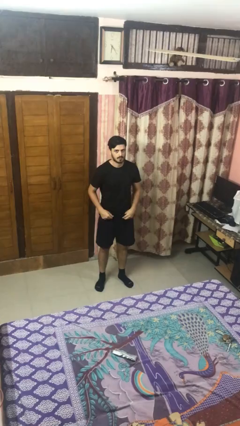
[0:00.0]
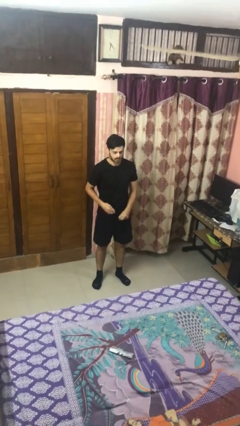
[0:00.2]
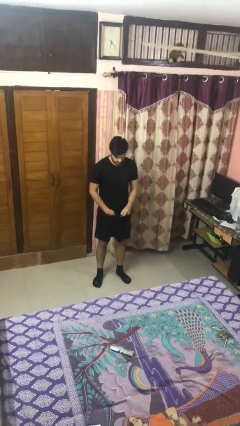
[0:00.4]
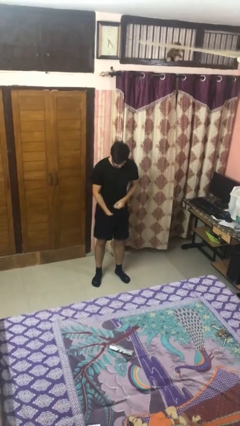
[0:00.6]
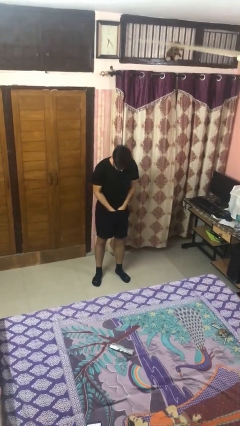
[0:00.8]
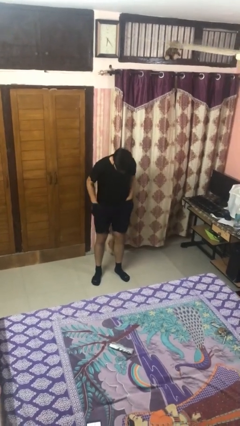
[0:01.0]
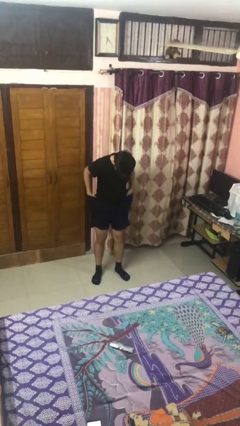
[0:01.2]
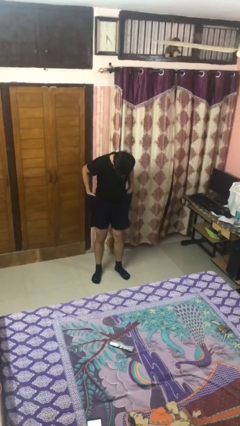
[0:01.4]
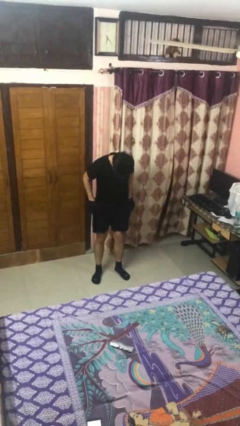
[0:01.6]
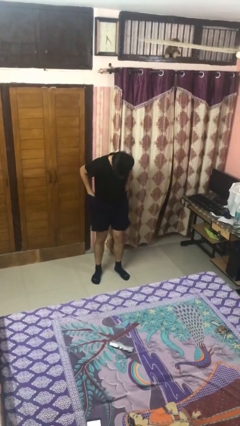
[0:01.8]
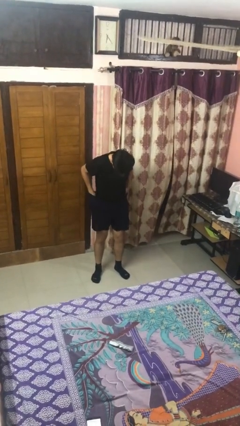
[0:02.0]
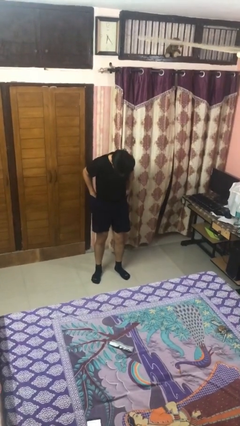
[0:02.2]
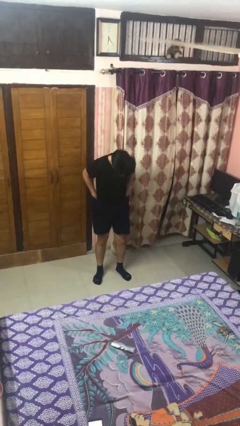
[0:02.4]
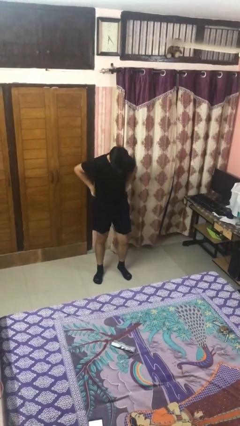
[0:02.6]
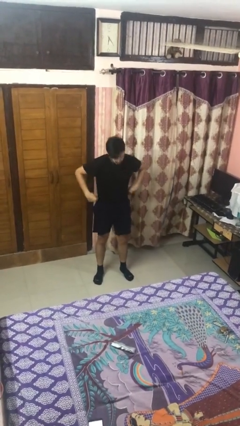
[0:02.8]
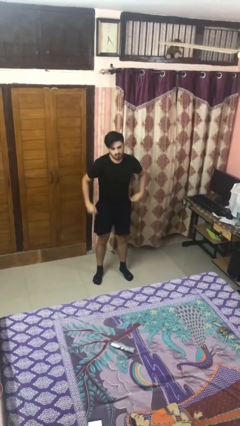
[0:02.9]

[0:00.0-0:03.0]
person tucks in shirt

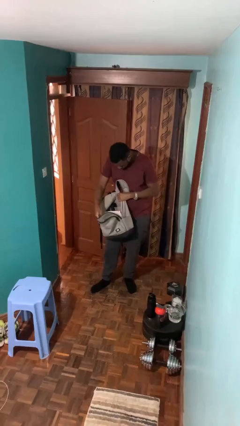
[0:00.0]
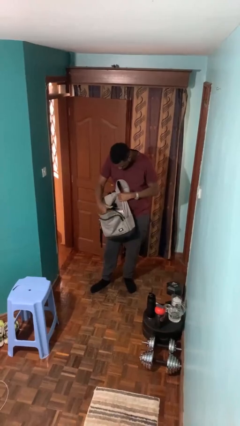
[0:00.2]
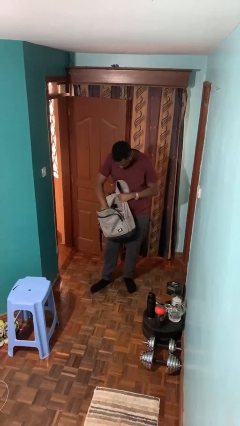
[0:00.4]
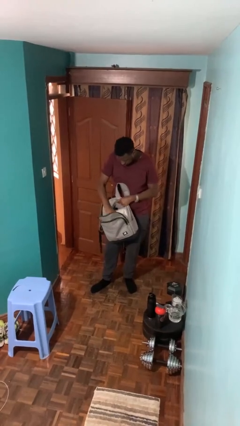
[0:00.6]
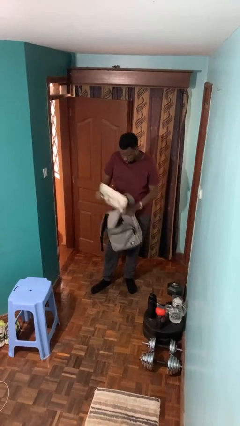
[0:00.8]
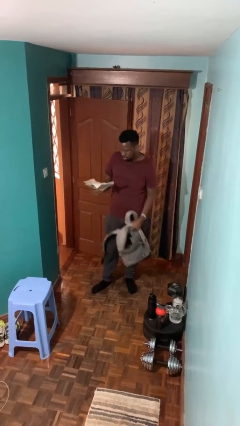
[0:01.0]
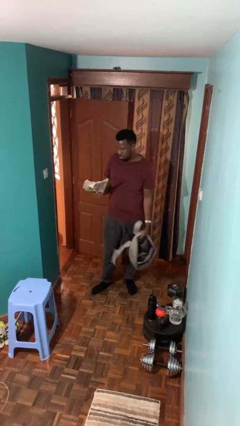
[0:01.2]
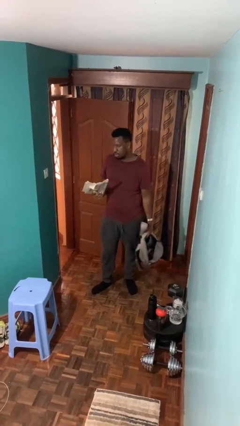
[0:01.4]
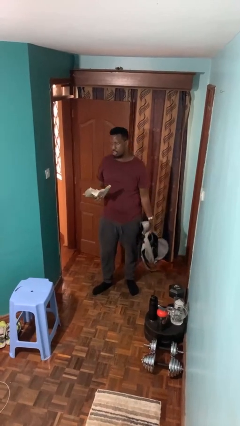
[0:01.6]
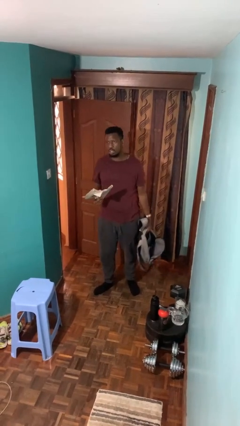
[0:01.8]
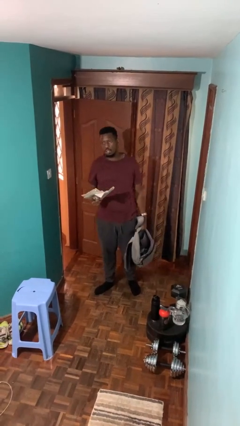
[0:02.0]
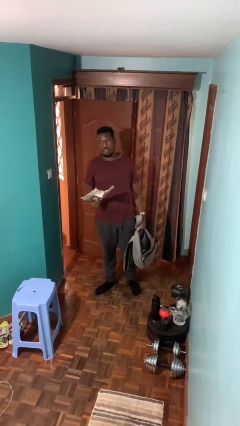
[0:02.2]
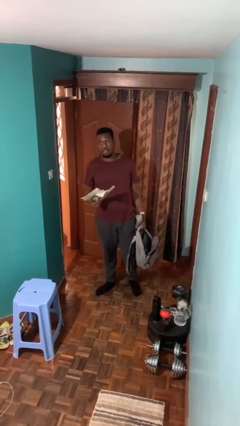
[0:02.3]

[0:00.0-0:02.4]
person takes object from backpack

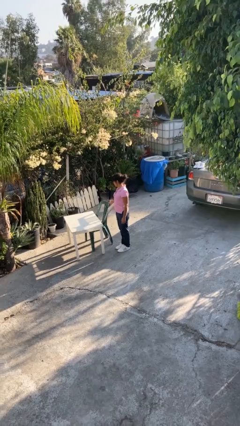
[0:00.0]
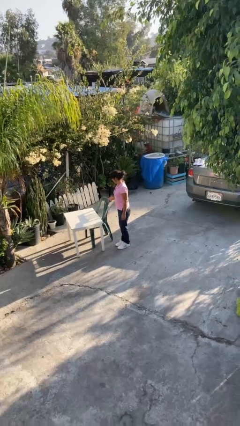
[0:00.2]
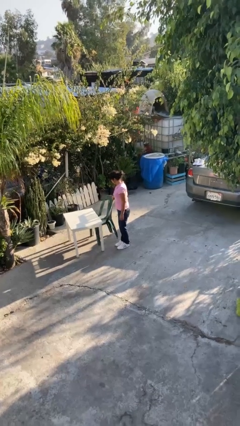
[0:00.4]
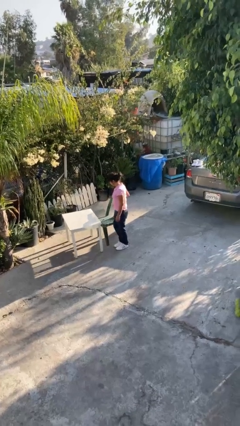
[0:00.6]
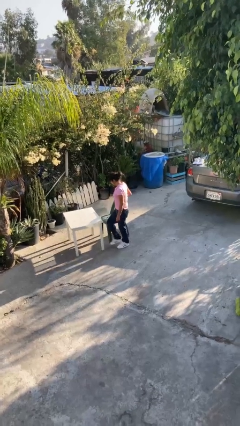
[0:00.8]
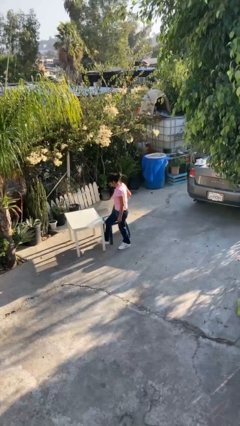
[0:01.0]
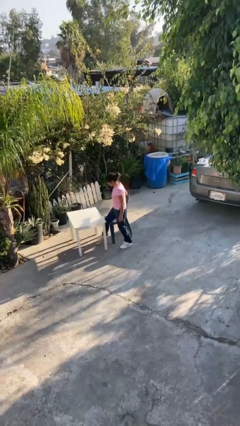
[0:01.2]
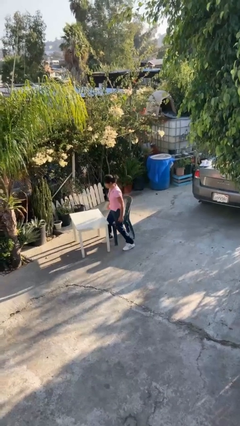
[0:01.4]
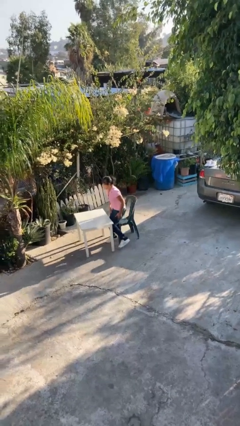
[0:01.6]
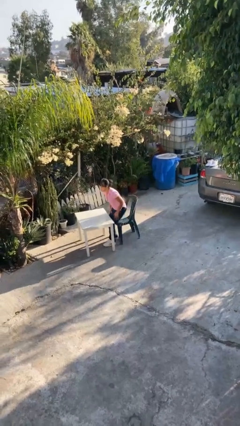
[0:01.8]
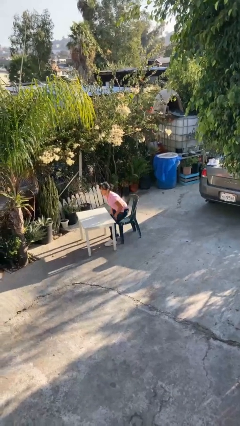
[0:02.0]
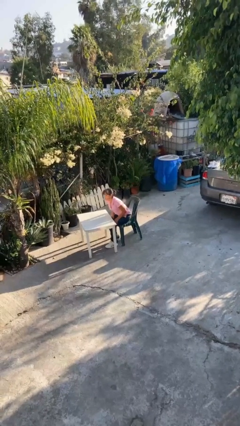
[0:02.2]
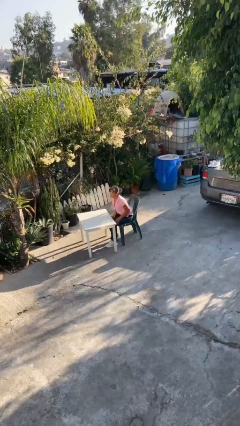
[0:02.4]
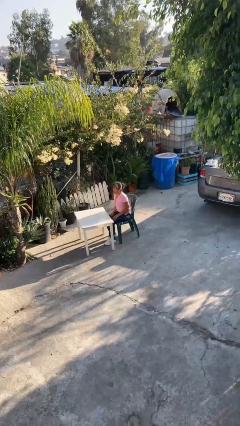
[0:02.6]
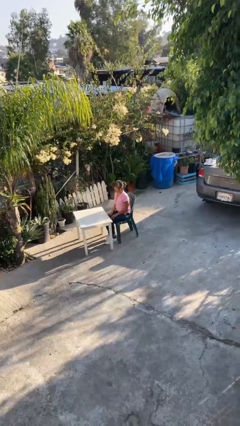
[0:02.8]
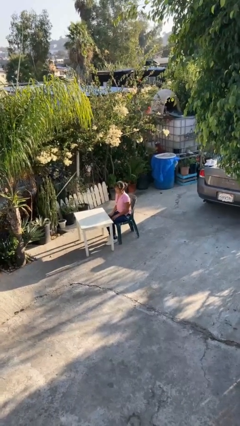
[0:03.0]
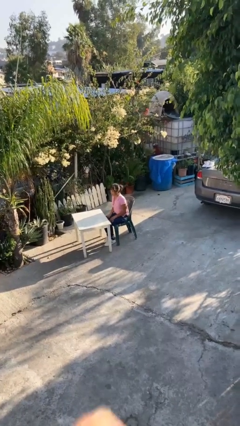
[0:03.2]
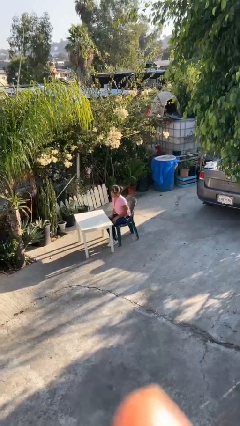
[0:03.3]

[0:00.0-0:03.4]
person sits down

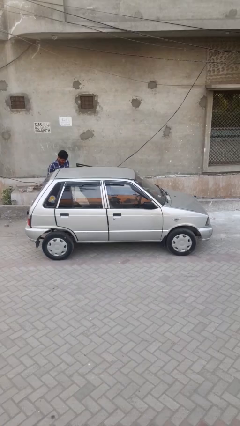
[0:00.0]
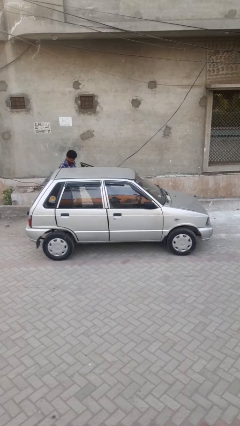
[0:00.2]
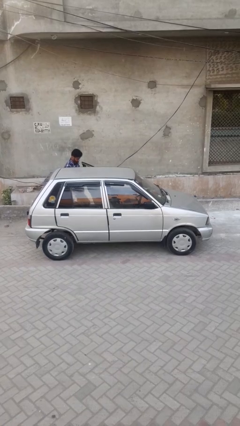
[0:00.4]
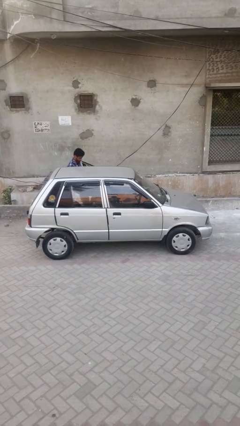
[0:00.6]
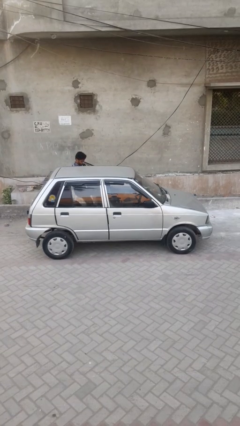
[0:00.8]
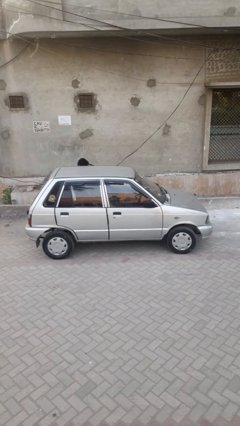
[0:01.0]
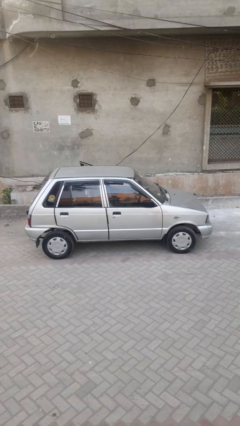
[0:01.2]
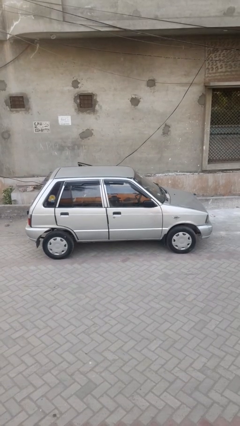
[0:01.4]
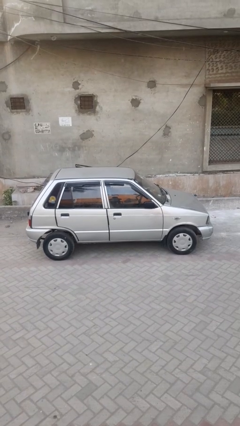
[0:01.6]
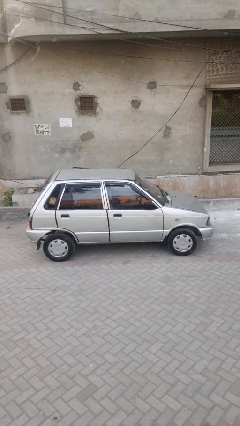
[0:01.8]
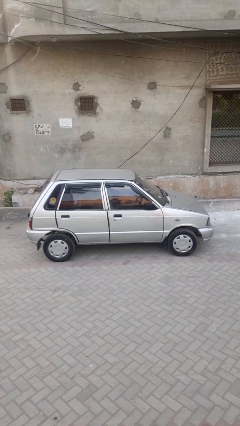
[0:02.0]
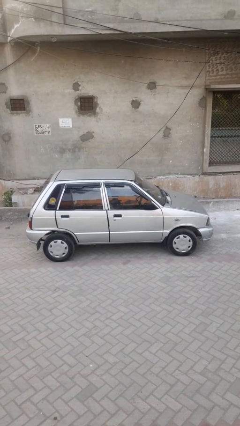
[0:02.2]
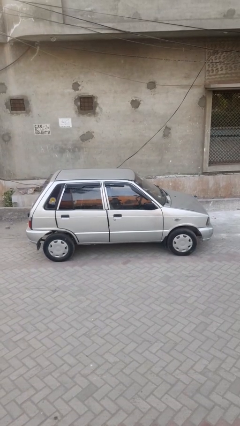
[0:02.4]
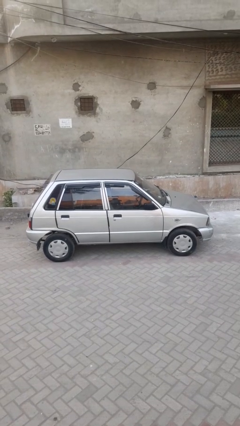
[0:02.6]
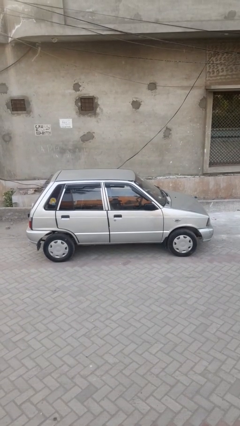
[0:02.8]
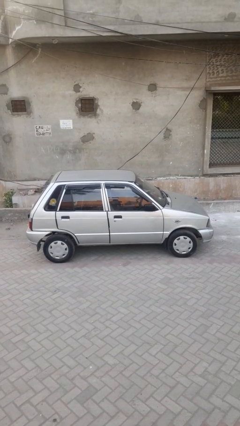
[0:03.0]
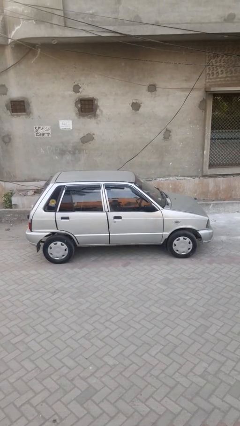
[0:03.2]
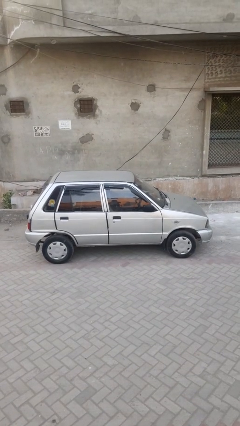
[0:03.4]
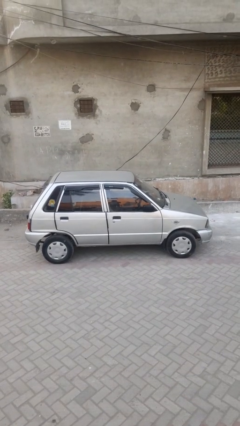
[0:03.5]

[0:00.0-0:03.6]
car picks up person

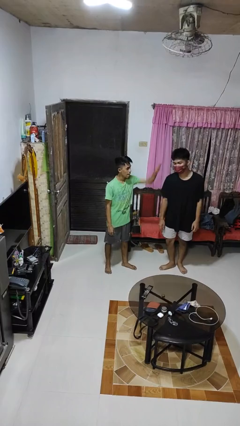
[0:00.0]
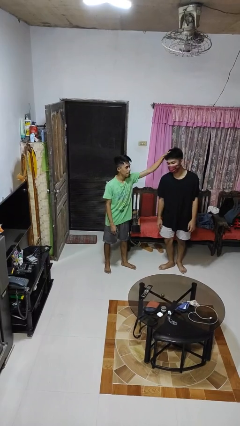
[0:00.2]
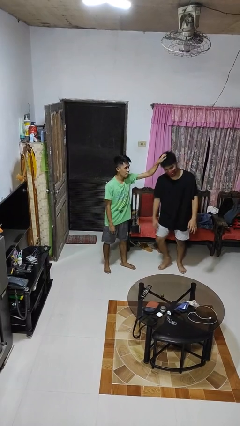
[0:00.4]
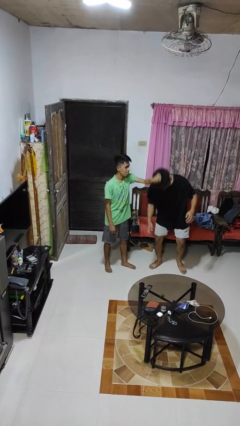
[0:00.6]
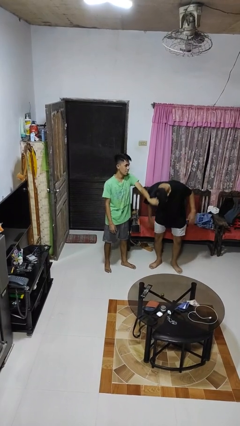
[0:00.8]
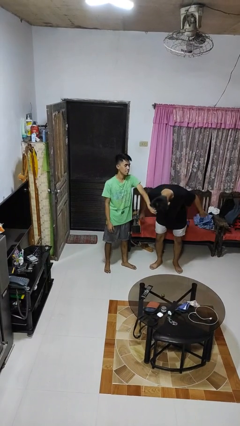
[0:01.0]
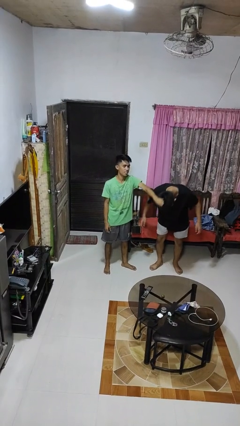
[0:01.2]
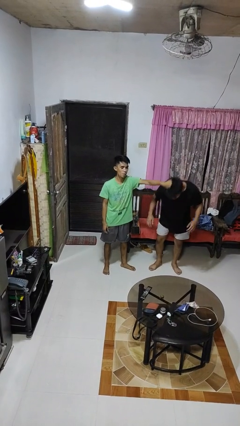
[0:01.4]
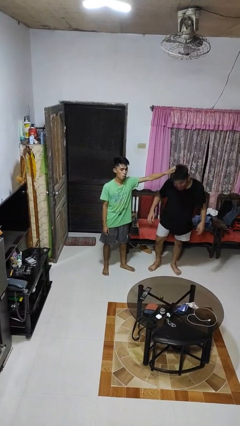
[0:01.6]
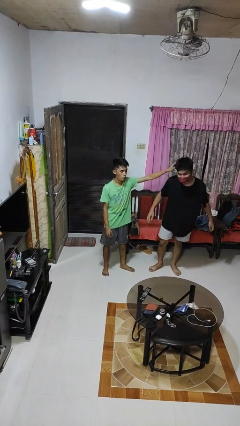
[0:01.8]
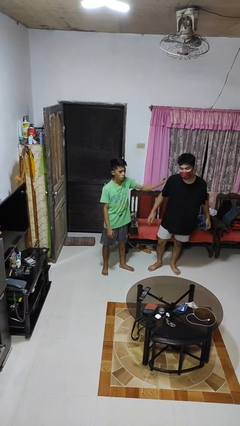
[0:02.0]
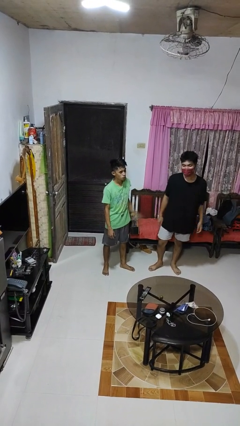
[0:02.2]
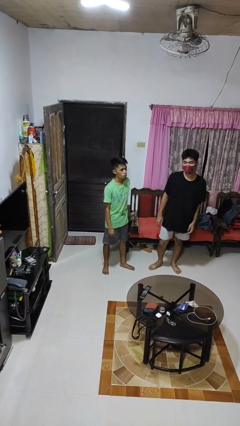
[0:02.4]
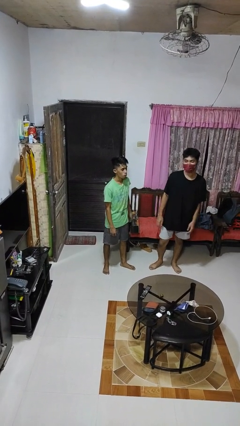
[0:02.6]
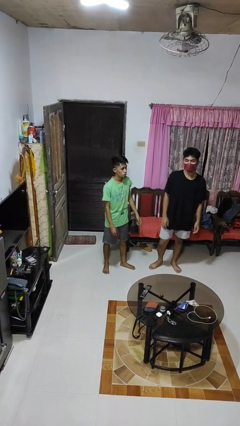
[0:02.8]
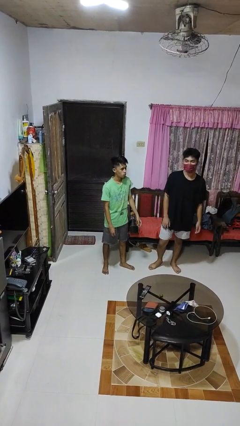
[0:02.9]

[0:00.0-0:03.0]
person grabs person by hair

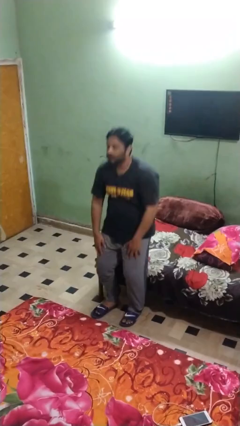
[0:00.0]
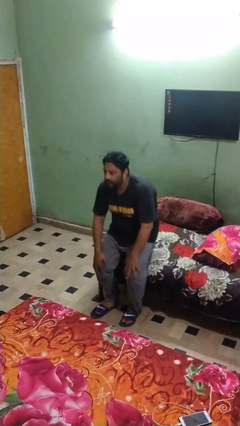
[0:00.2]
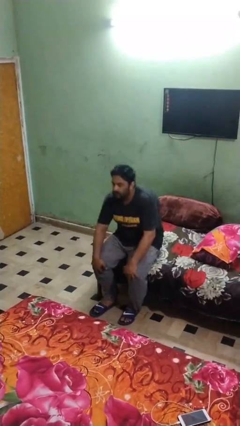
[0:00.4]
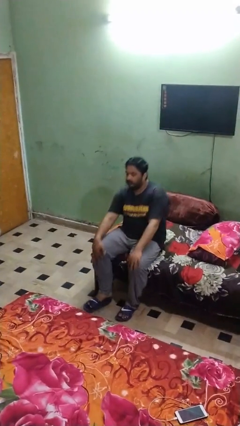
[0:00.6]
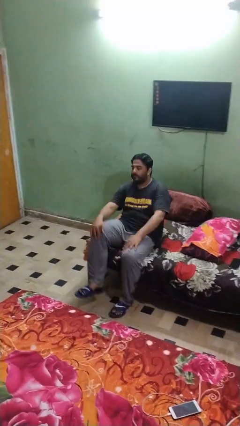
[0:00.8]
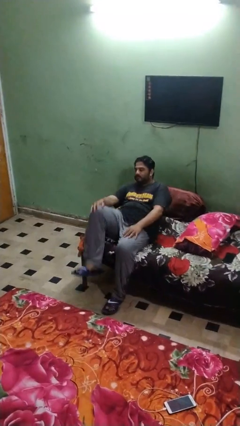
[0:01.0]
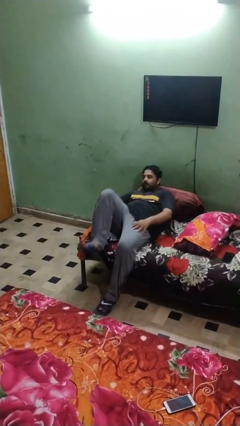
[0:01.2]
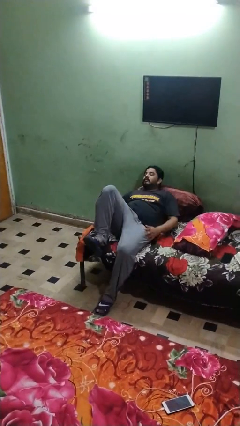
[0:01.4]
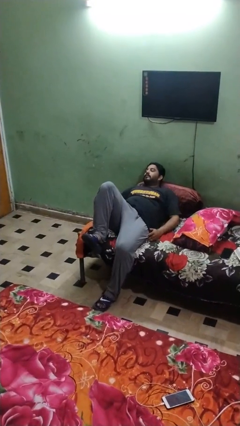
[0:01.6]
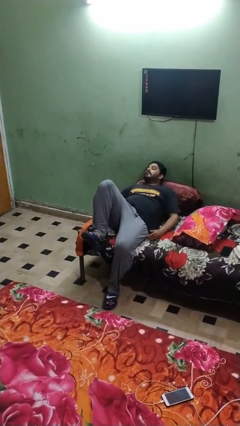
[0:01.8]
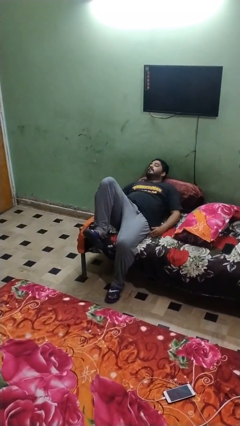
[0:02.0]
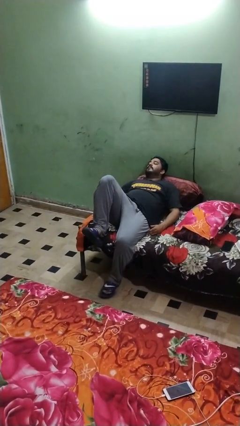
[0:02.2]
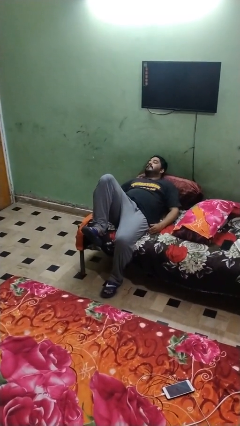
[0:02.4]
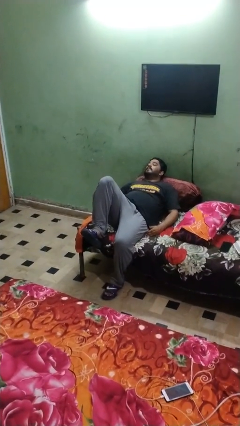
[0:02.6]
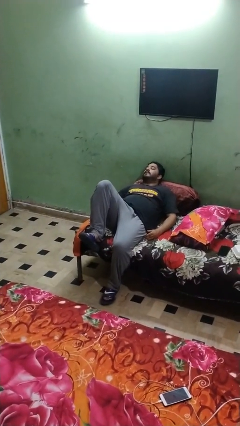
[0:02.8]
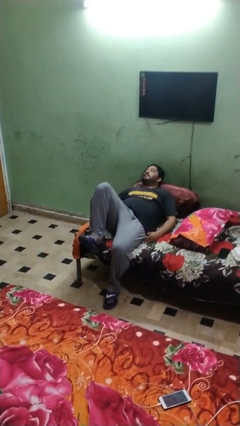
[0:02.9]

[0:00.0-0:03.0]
person lies down on couch
